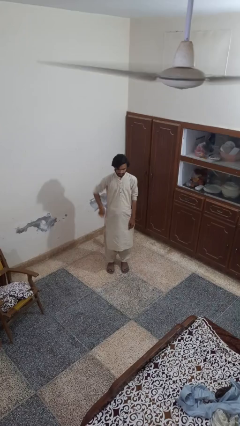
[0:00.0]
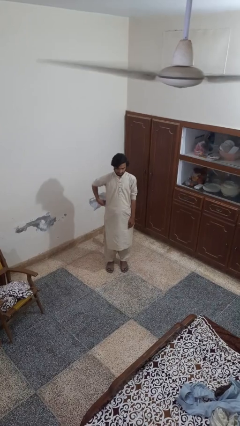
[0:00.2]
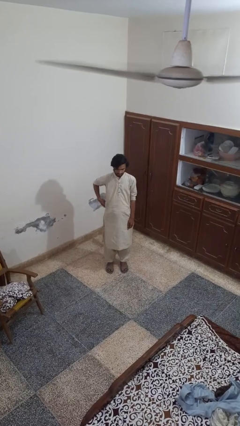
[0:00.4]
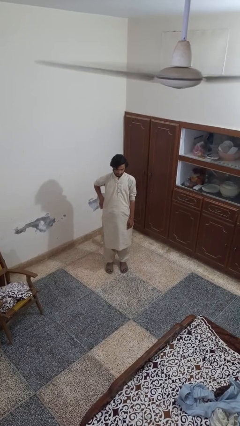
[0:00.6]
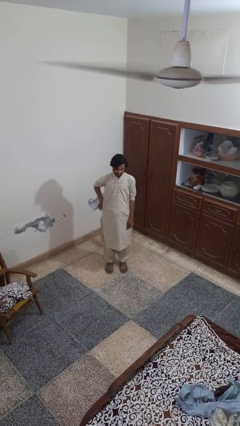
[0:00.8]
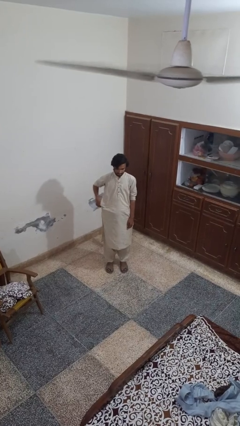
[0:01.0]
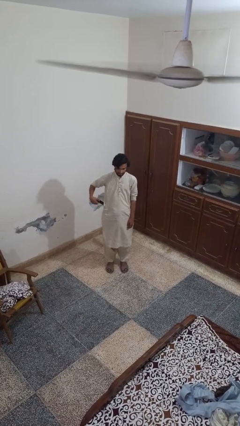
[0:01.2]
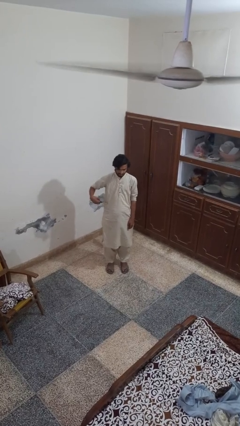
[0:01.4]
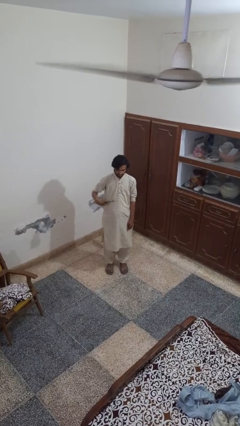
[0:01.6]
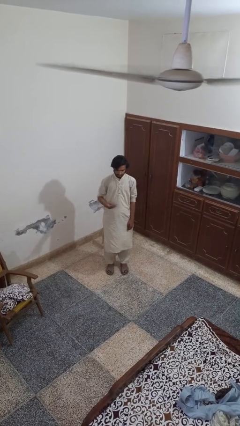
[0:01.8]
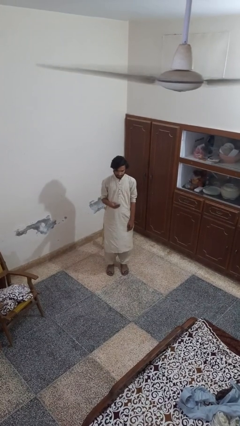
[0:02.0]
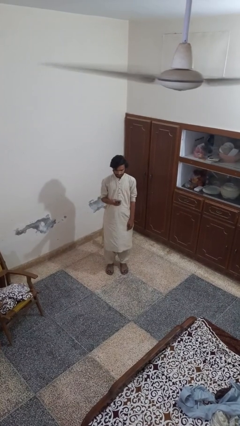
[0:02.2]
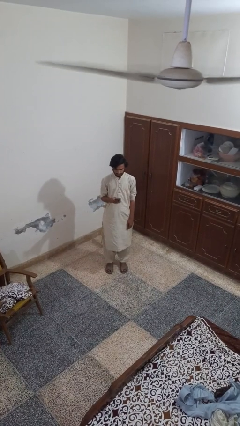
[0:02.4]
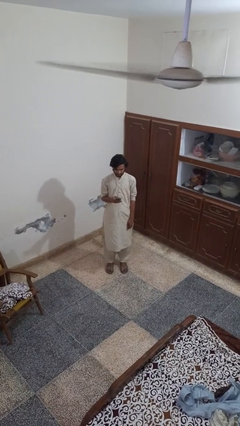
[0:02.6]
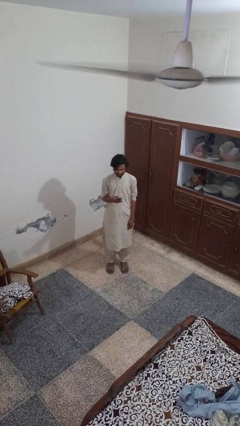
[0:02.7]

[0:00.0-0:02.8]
person takes phone from pocket

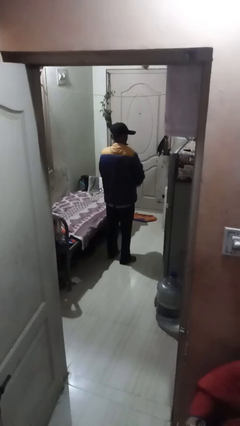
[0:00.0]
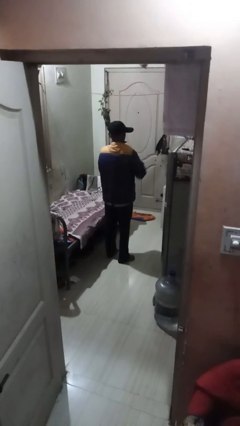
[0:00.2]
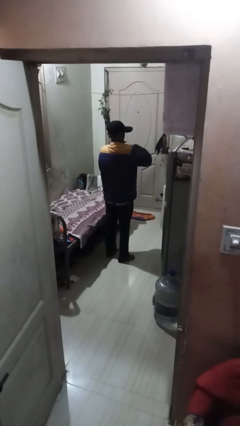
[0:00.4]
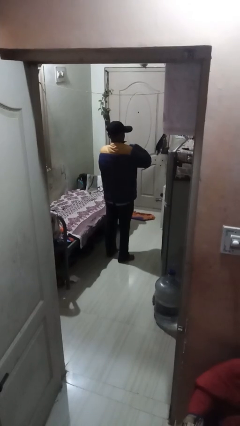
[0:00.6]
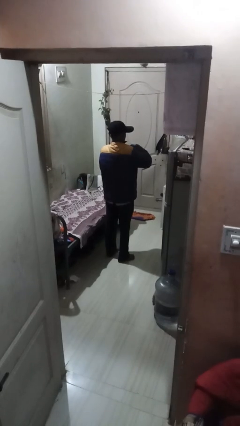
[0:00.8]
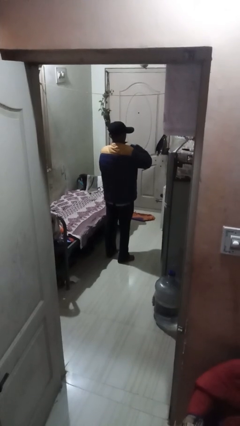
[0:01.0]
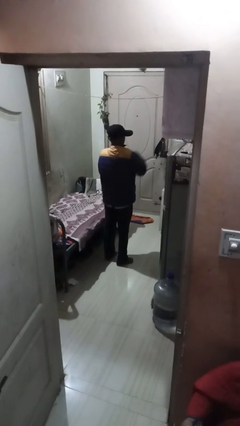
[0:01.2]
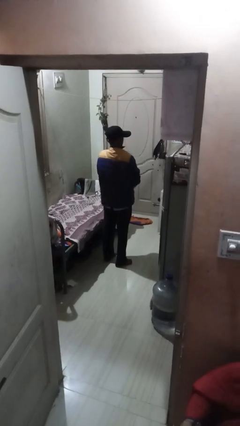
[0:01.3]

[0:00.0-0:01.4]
person zips up jacket

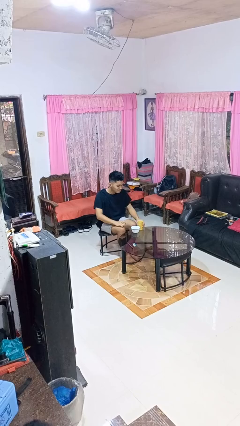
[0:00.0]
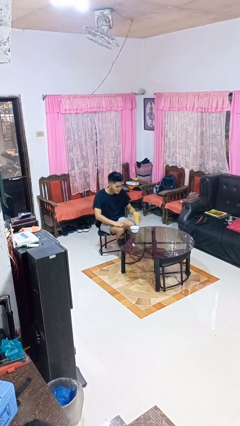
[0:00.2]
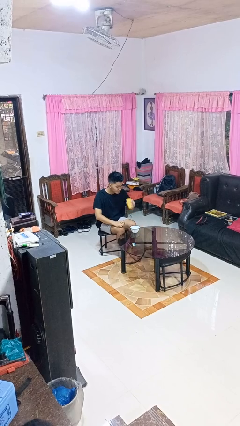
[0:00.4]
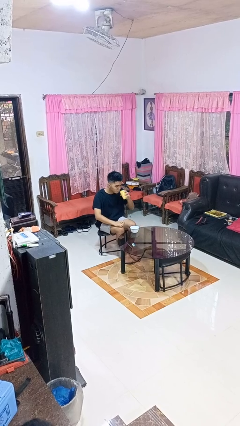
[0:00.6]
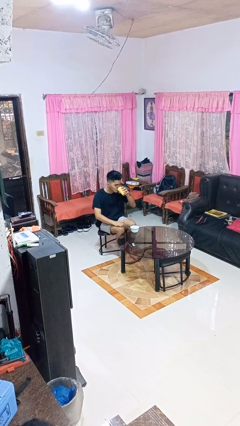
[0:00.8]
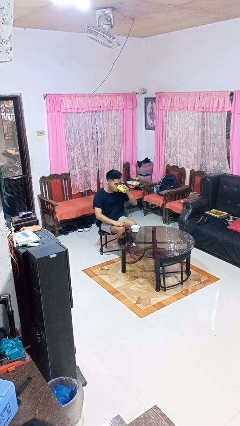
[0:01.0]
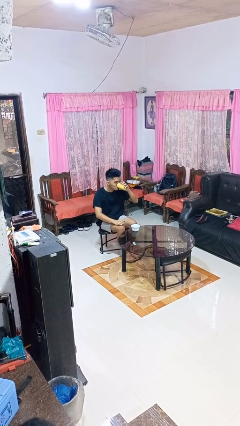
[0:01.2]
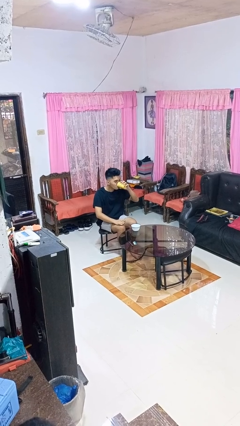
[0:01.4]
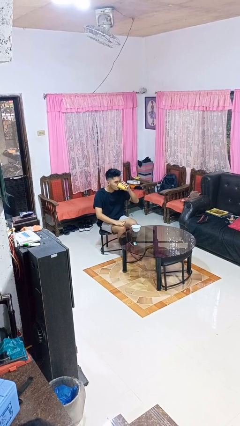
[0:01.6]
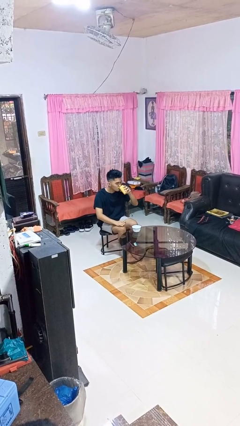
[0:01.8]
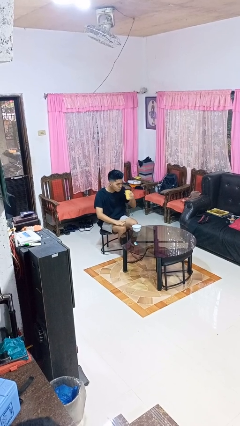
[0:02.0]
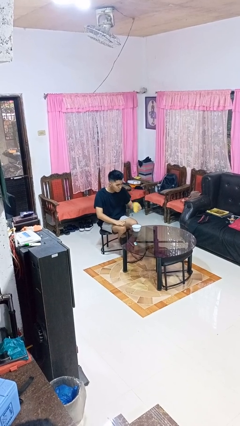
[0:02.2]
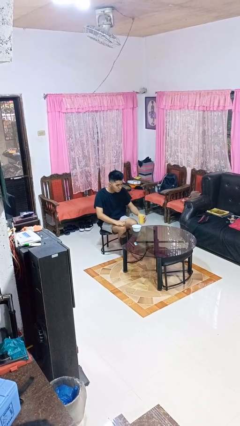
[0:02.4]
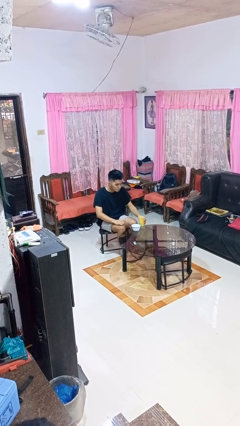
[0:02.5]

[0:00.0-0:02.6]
person drinks from cup

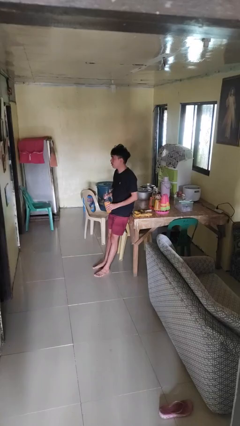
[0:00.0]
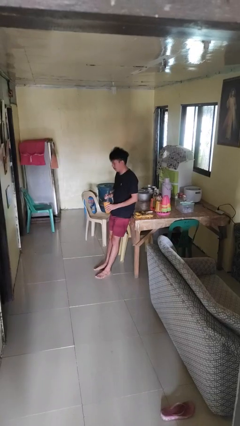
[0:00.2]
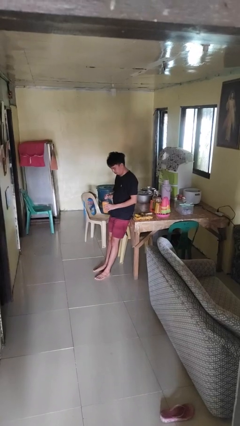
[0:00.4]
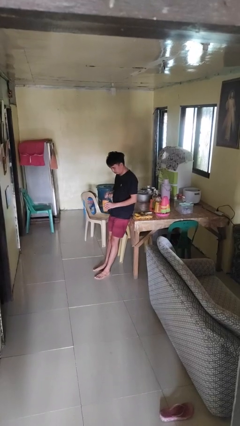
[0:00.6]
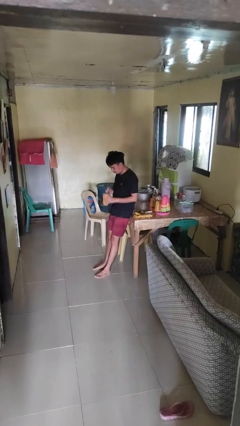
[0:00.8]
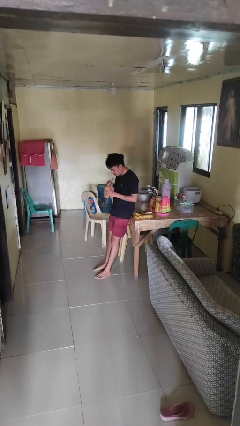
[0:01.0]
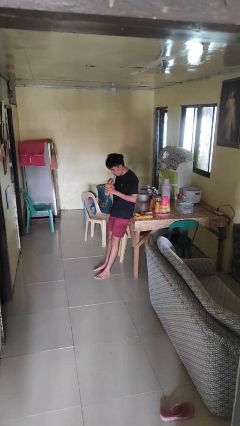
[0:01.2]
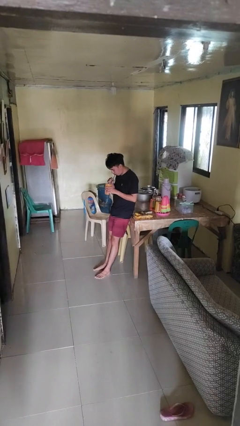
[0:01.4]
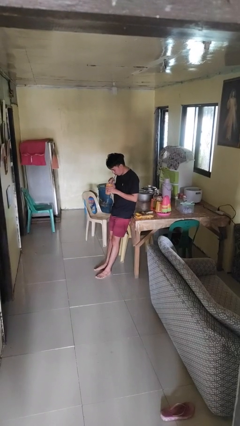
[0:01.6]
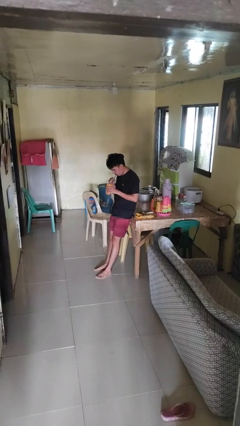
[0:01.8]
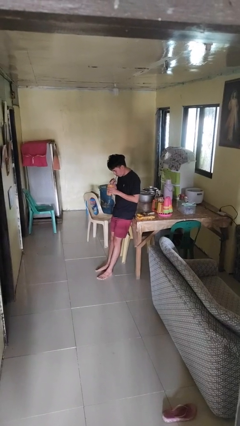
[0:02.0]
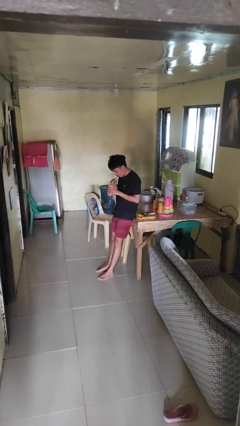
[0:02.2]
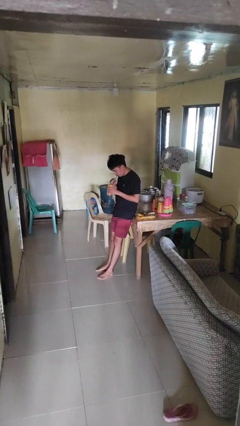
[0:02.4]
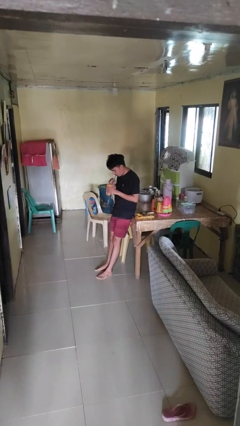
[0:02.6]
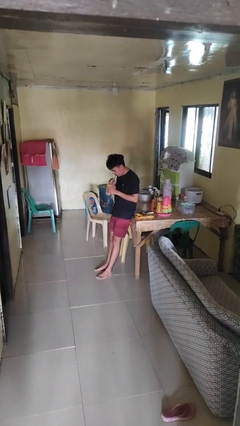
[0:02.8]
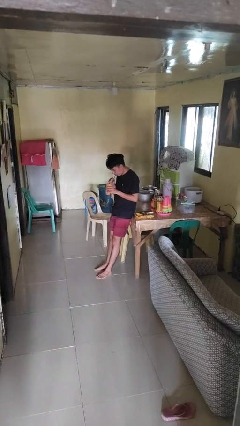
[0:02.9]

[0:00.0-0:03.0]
person drinks from straw

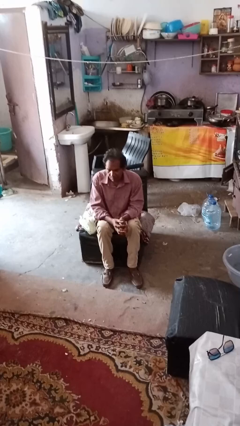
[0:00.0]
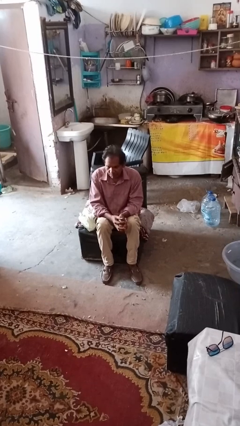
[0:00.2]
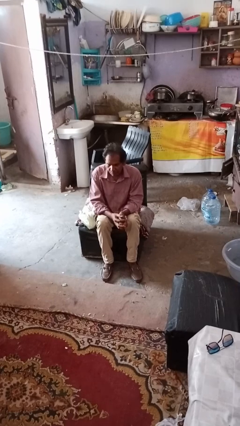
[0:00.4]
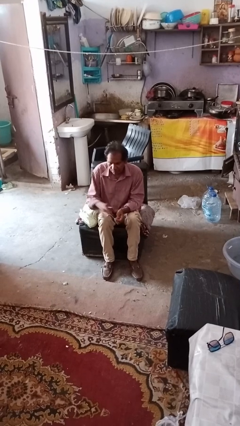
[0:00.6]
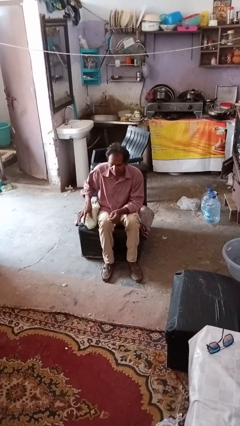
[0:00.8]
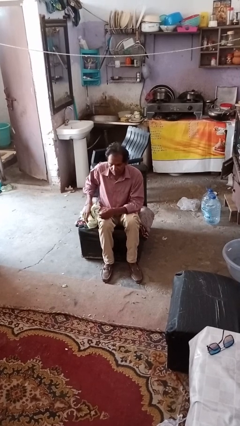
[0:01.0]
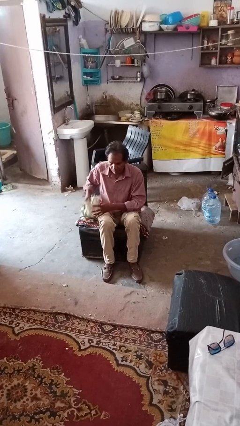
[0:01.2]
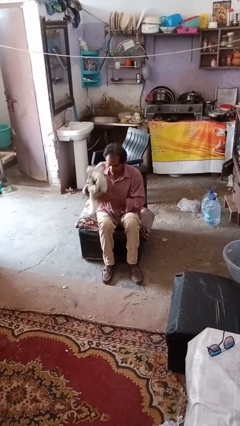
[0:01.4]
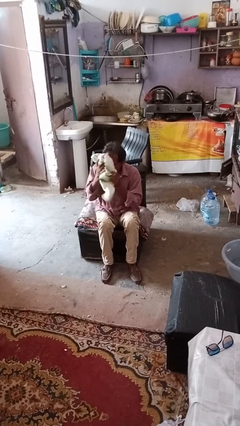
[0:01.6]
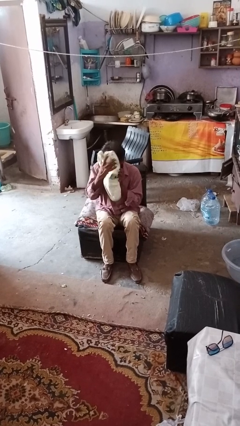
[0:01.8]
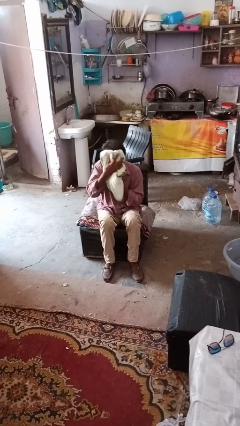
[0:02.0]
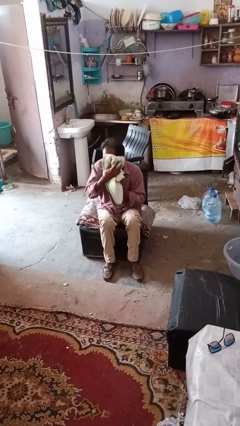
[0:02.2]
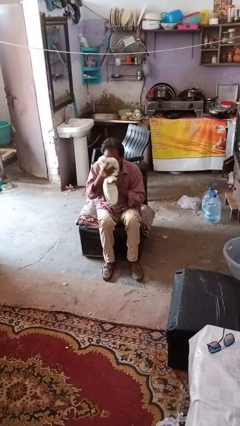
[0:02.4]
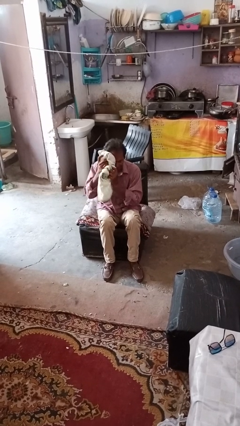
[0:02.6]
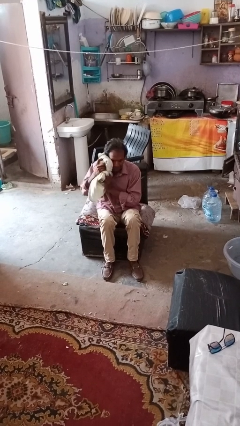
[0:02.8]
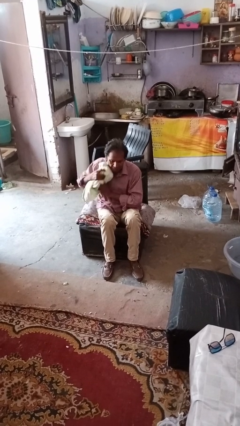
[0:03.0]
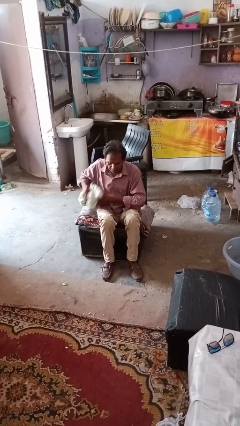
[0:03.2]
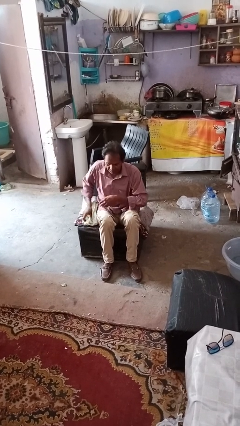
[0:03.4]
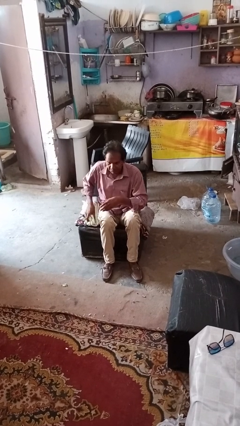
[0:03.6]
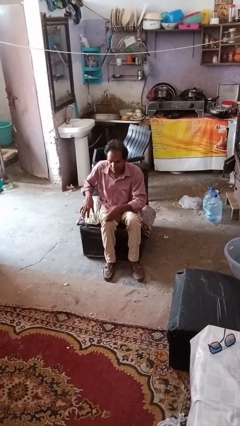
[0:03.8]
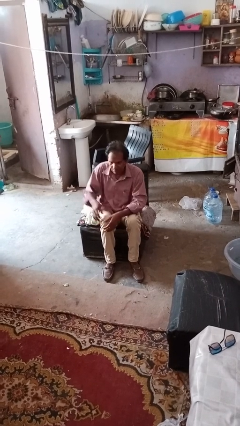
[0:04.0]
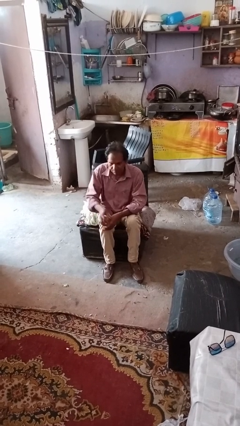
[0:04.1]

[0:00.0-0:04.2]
person wipes mouth with napkin

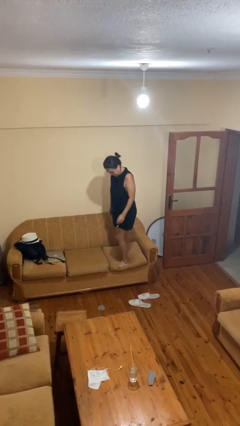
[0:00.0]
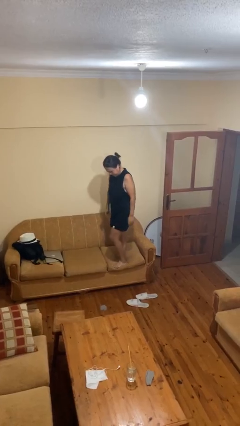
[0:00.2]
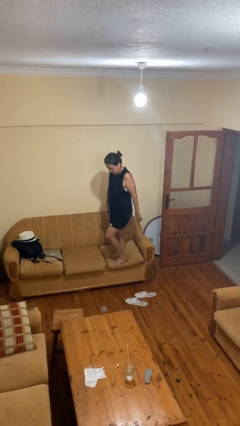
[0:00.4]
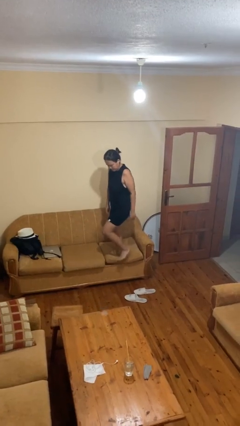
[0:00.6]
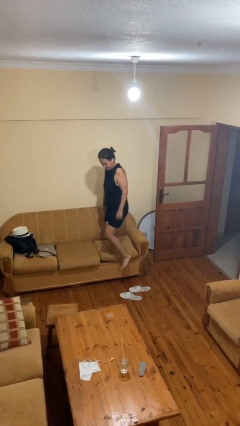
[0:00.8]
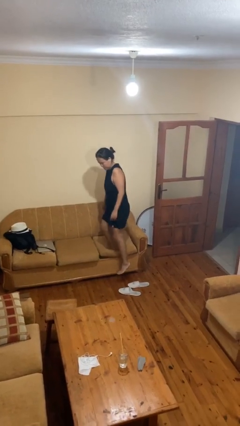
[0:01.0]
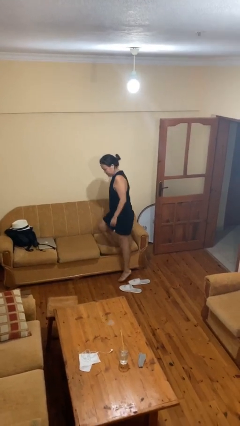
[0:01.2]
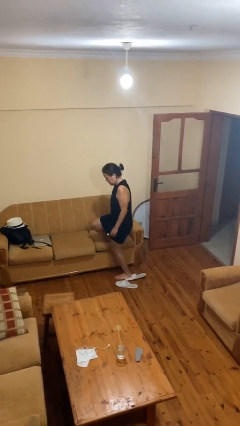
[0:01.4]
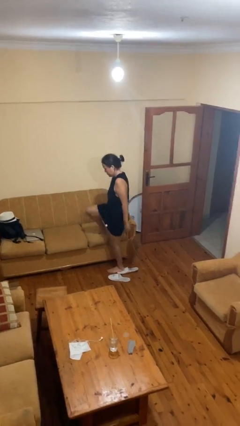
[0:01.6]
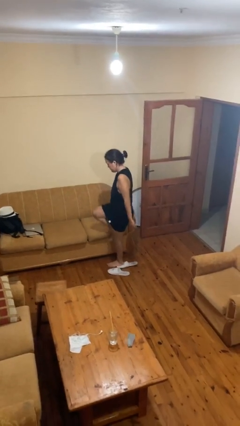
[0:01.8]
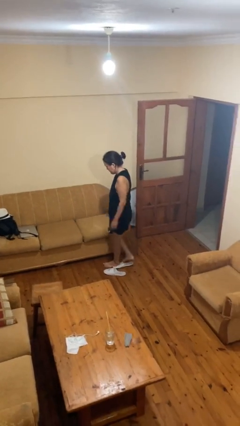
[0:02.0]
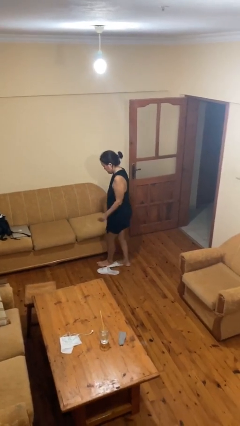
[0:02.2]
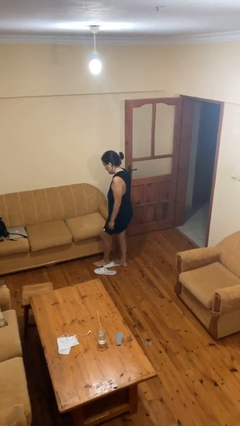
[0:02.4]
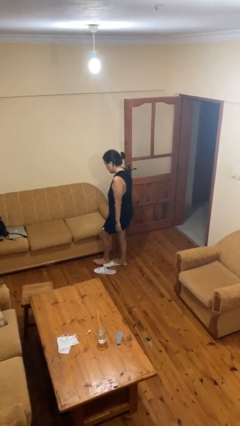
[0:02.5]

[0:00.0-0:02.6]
person climbs off couch

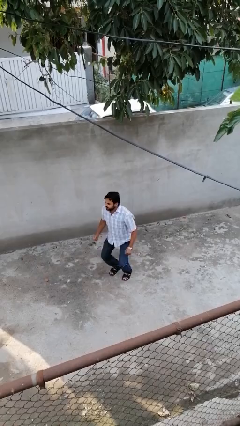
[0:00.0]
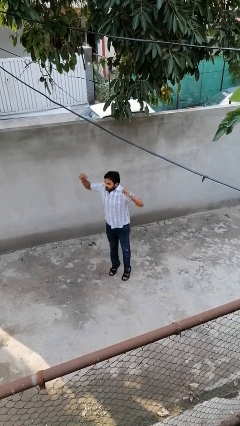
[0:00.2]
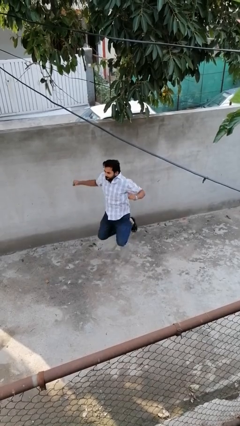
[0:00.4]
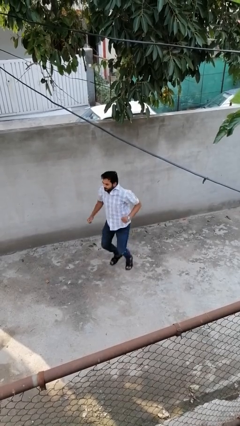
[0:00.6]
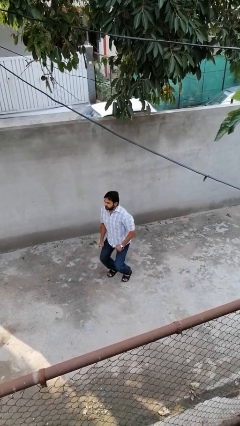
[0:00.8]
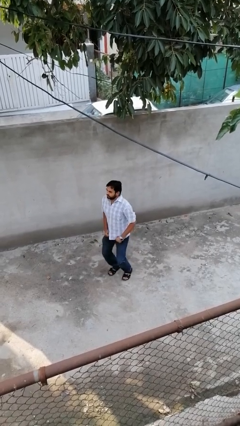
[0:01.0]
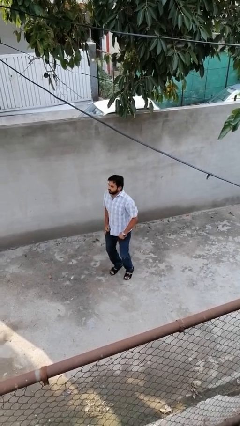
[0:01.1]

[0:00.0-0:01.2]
person jumps
